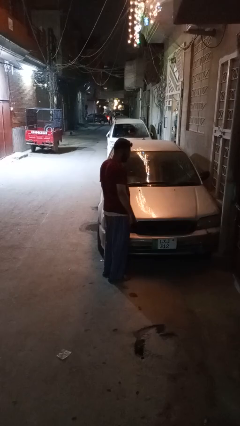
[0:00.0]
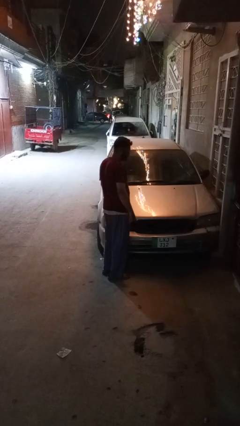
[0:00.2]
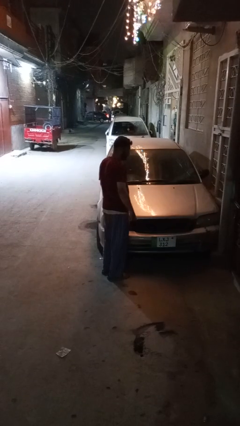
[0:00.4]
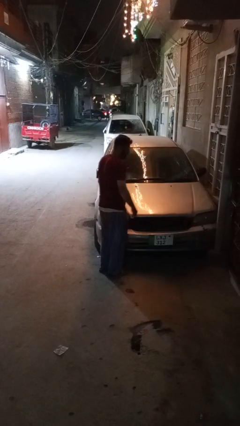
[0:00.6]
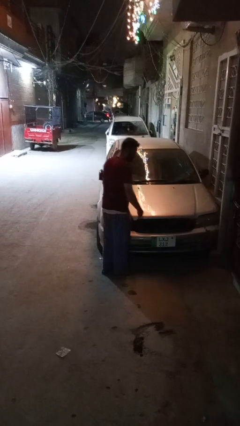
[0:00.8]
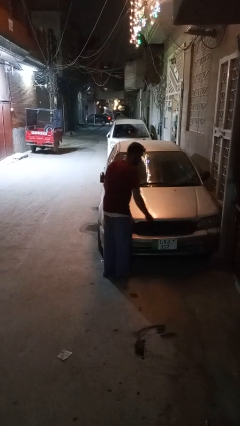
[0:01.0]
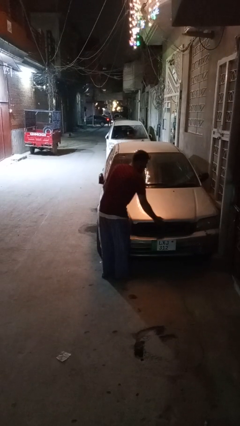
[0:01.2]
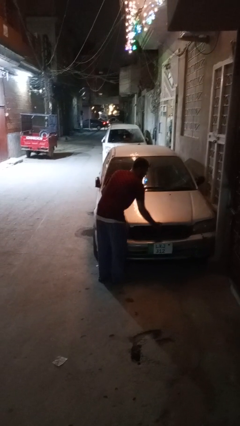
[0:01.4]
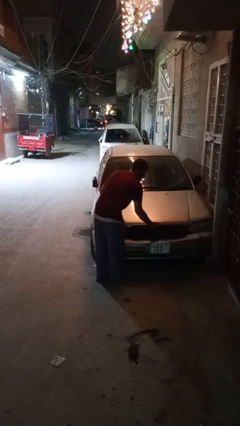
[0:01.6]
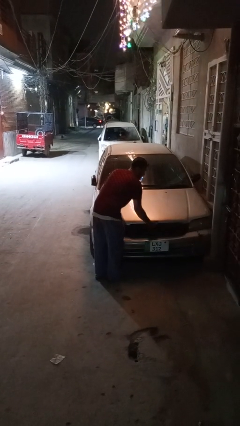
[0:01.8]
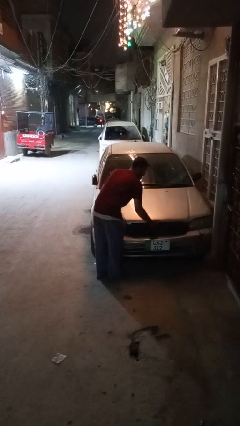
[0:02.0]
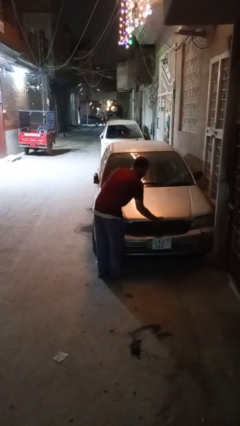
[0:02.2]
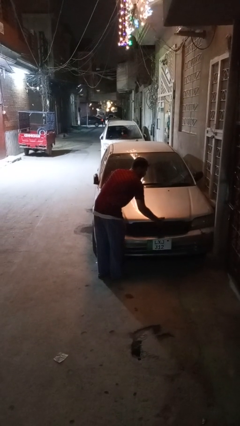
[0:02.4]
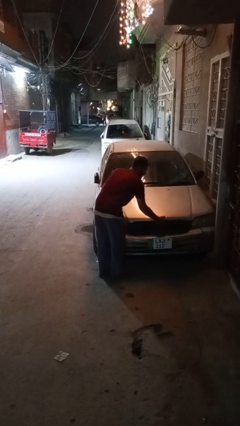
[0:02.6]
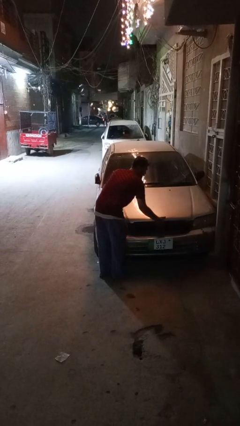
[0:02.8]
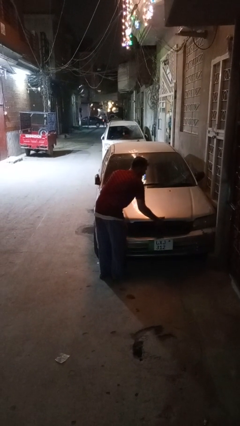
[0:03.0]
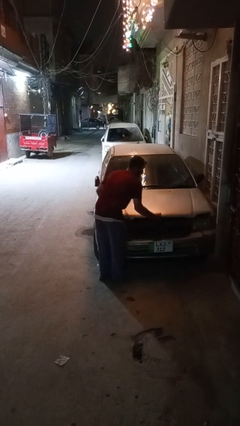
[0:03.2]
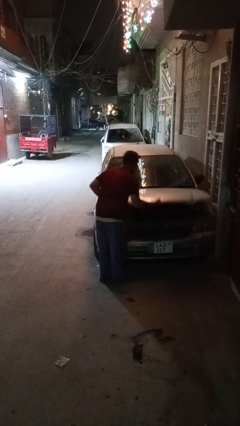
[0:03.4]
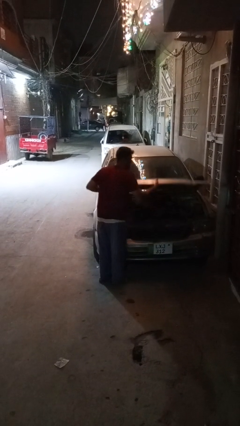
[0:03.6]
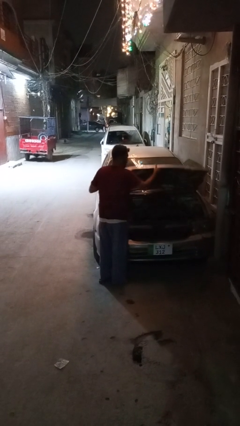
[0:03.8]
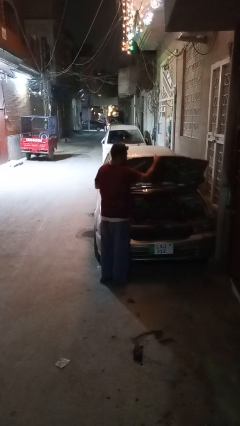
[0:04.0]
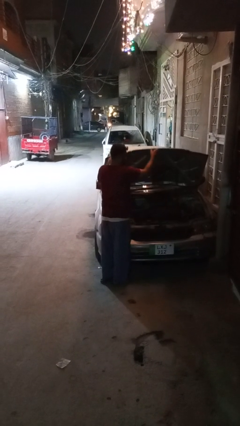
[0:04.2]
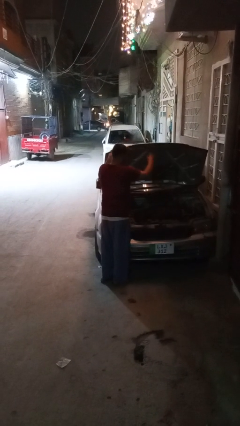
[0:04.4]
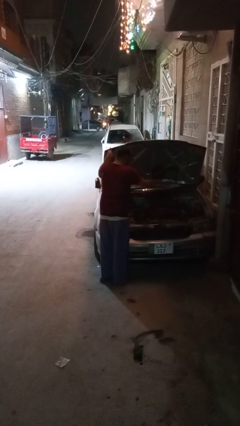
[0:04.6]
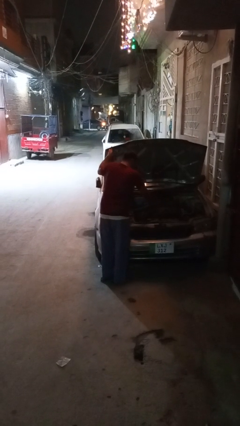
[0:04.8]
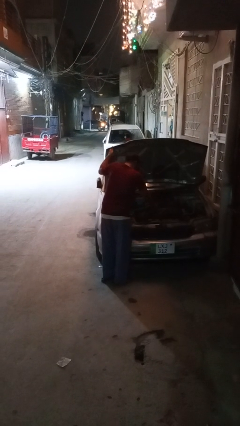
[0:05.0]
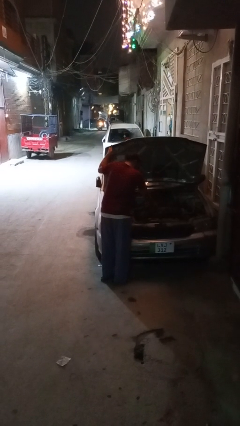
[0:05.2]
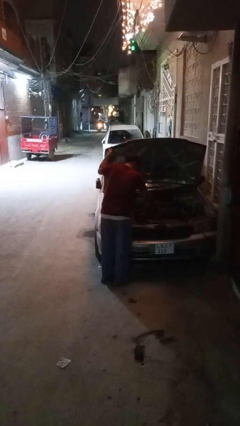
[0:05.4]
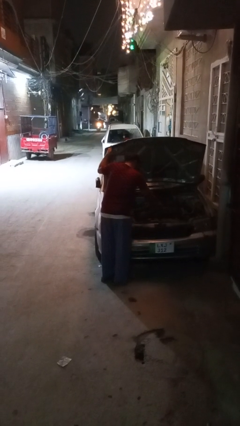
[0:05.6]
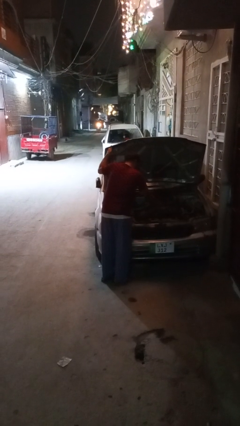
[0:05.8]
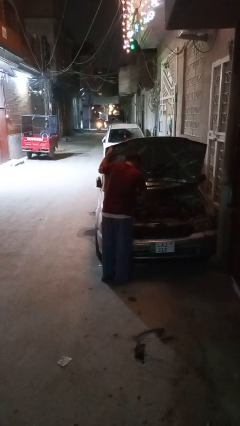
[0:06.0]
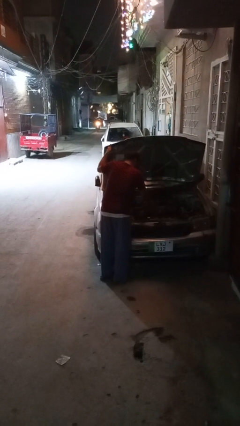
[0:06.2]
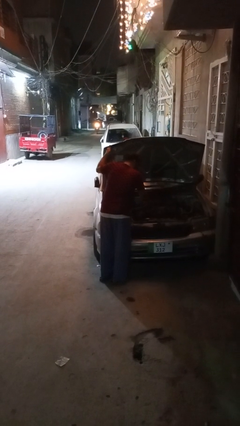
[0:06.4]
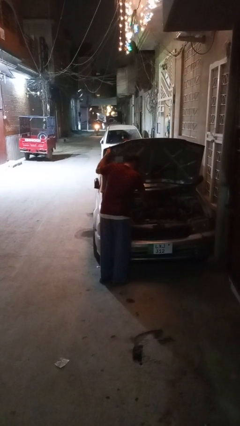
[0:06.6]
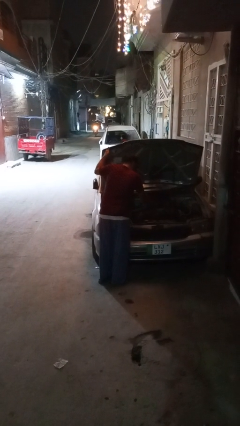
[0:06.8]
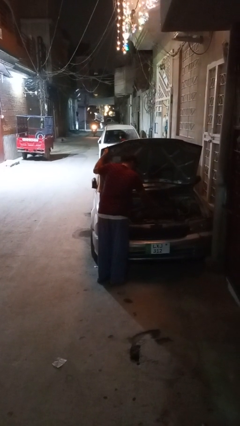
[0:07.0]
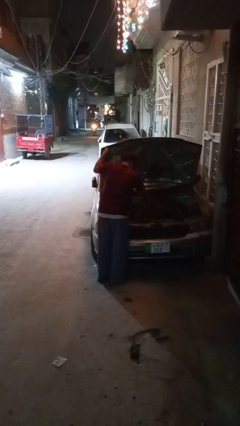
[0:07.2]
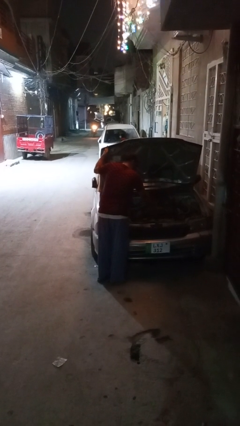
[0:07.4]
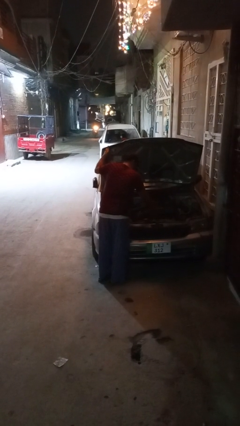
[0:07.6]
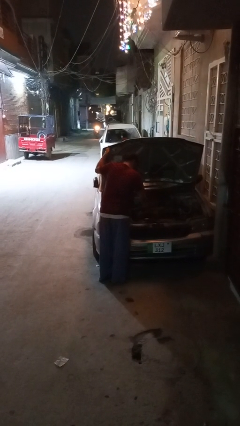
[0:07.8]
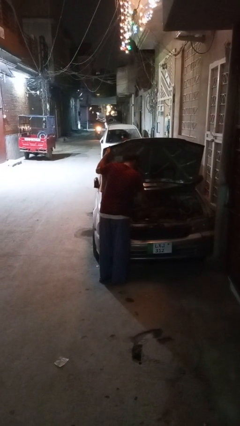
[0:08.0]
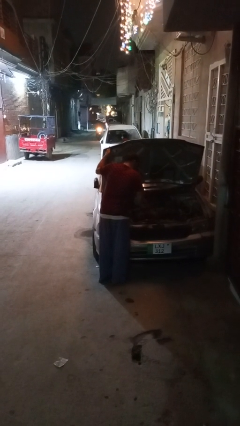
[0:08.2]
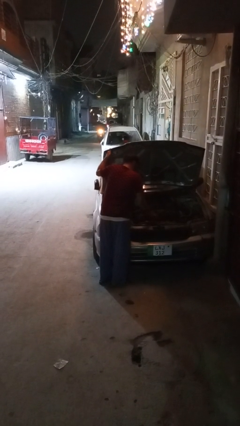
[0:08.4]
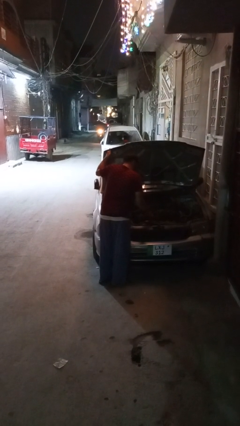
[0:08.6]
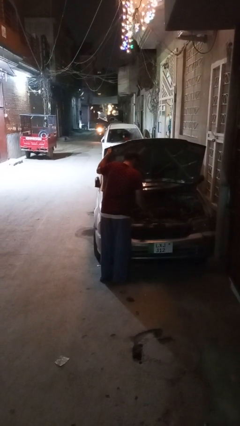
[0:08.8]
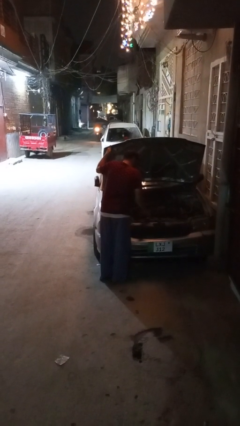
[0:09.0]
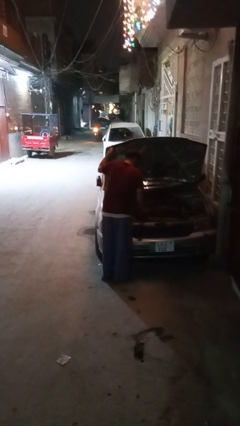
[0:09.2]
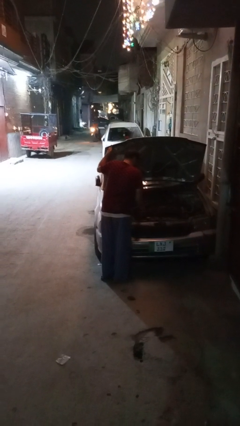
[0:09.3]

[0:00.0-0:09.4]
person opens car hood

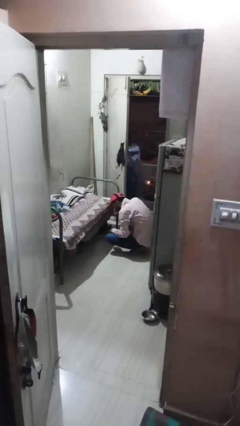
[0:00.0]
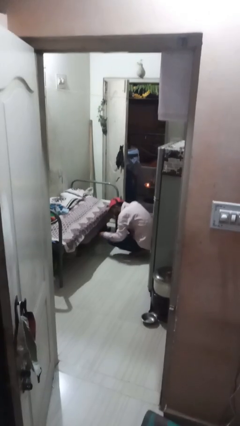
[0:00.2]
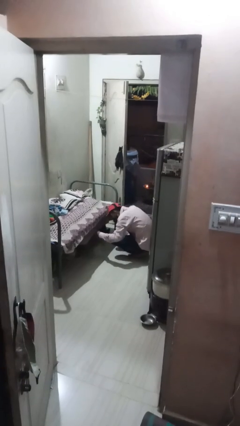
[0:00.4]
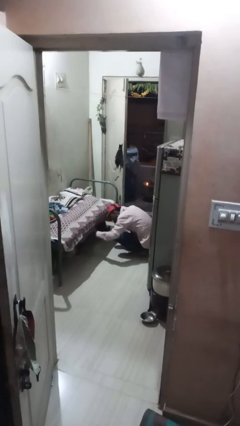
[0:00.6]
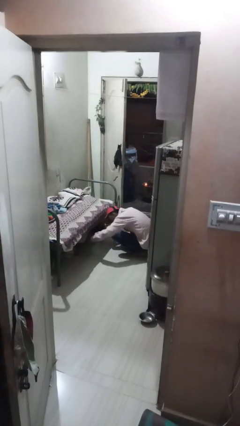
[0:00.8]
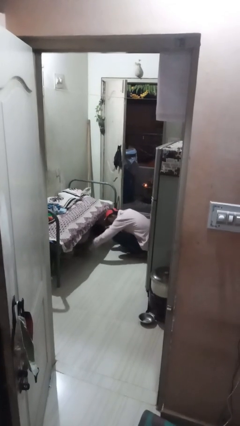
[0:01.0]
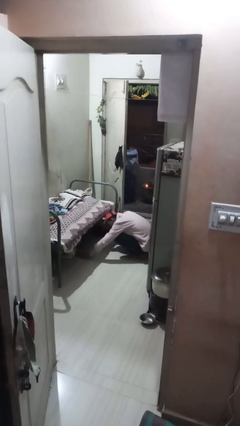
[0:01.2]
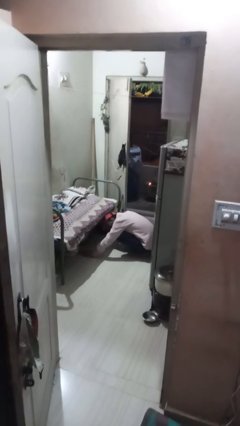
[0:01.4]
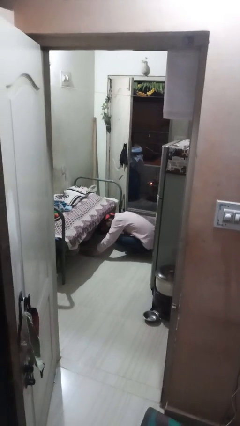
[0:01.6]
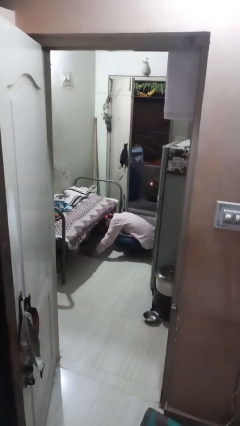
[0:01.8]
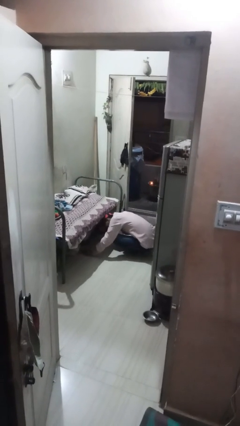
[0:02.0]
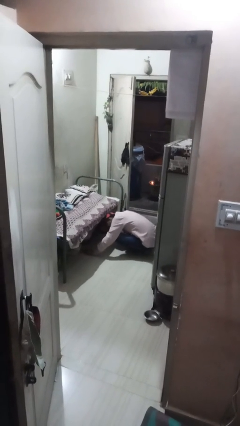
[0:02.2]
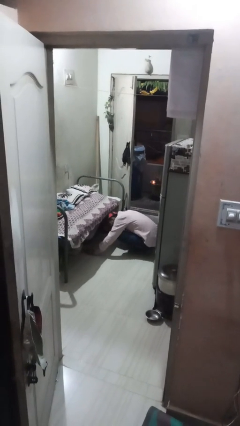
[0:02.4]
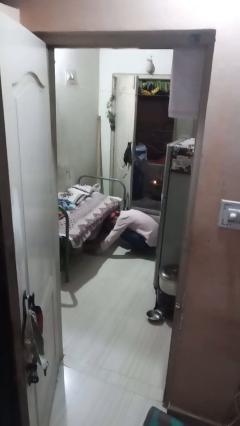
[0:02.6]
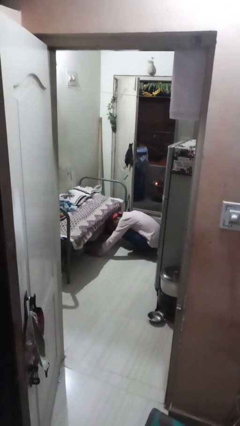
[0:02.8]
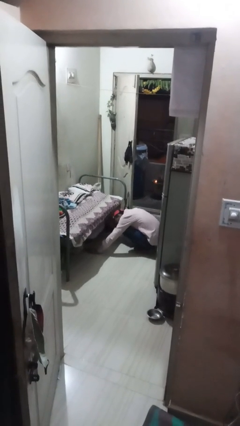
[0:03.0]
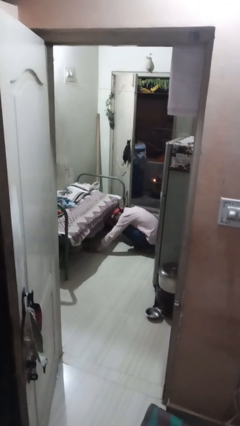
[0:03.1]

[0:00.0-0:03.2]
person searches under bed

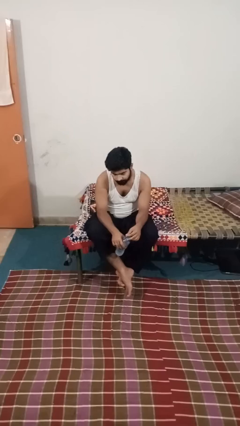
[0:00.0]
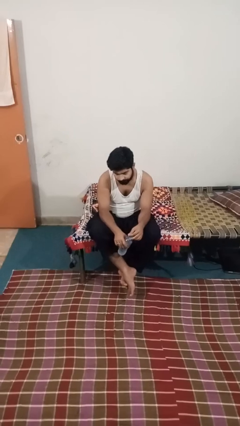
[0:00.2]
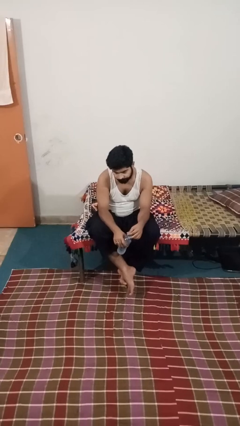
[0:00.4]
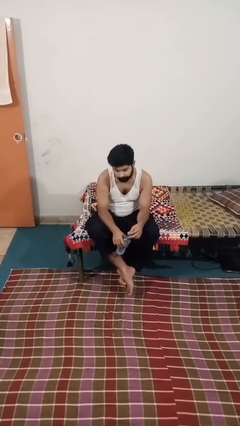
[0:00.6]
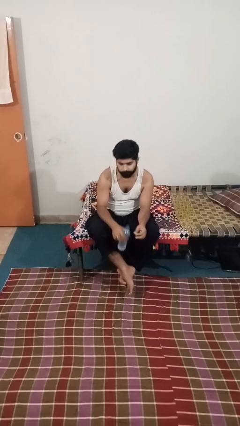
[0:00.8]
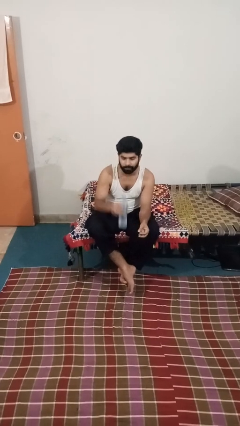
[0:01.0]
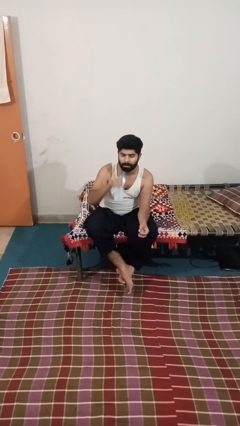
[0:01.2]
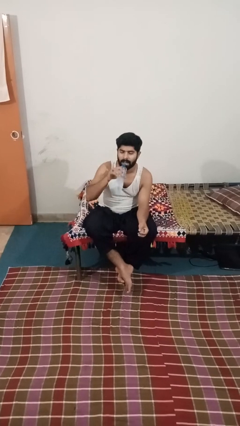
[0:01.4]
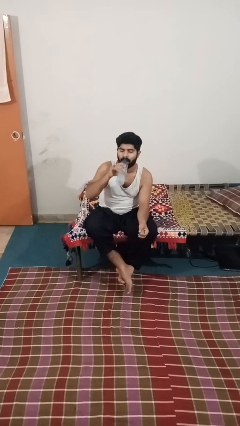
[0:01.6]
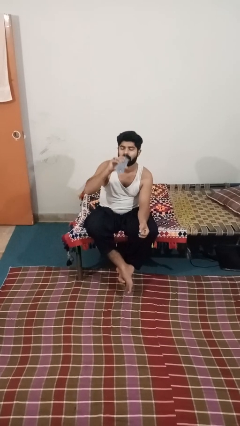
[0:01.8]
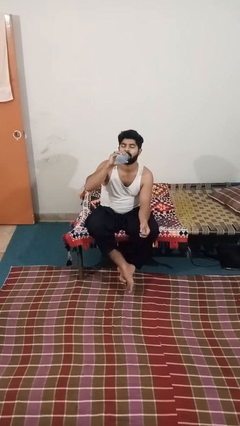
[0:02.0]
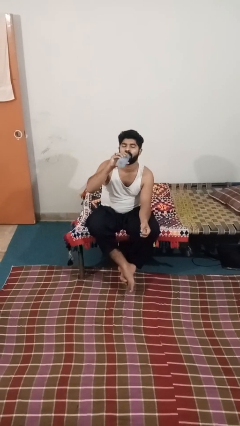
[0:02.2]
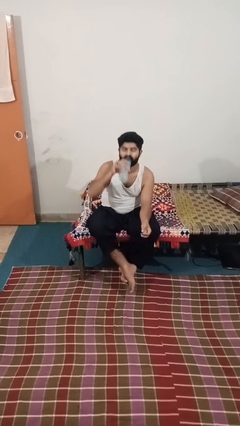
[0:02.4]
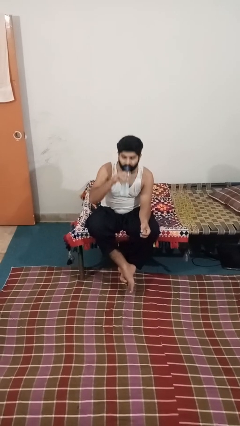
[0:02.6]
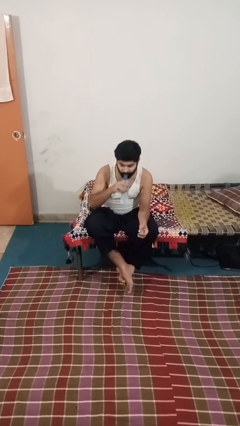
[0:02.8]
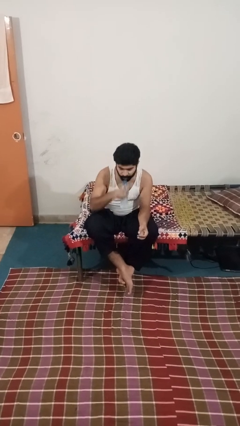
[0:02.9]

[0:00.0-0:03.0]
person drinks from bottle

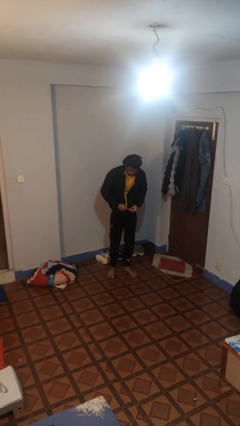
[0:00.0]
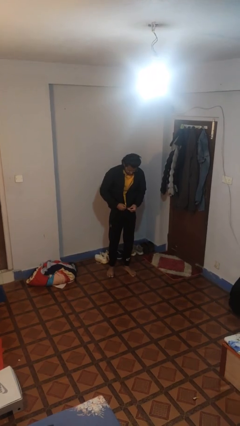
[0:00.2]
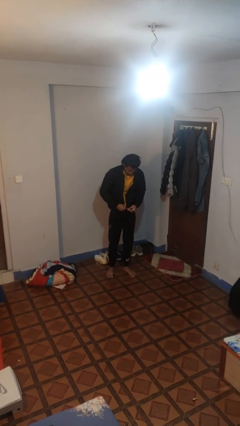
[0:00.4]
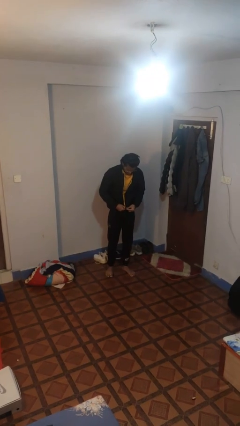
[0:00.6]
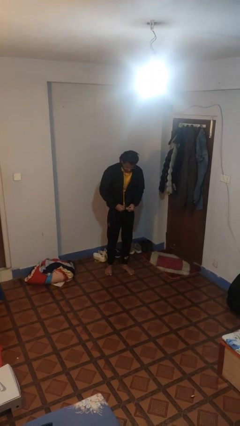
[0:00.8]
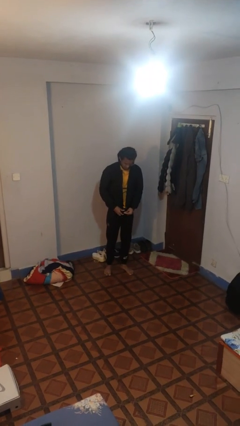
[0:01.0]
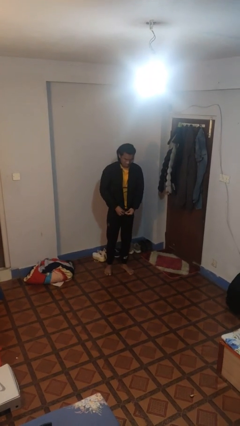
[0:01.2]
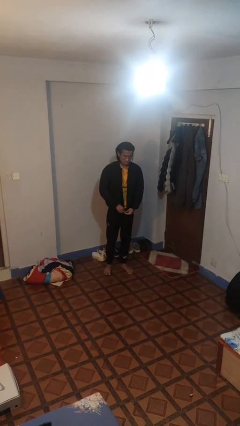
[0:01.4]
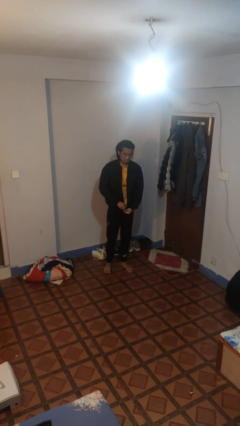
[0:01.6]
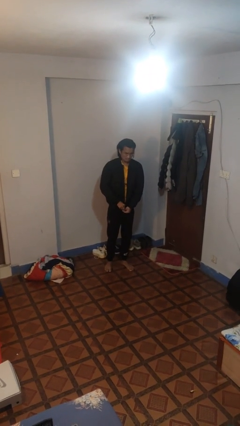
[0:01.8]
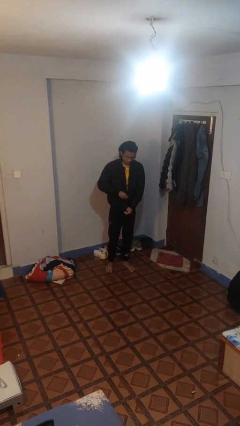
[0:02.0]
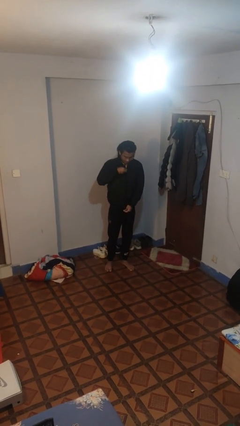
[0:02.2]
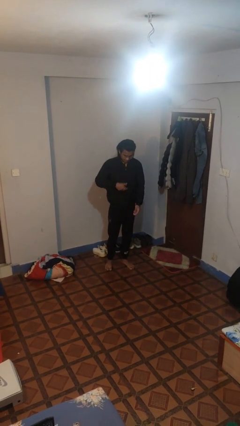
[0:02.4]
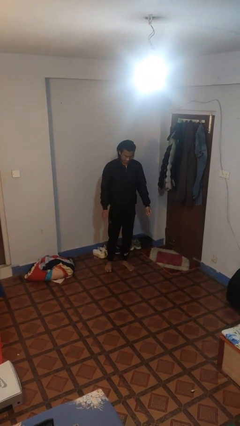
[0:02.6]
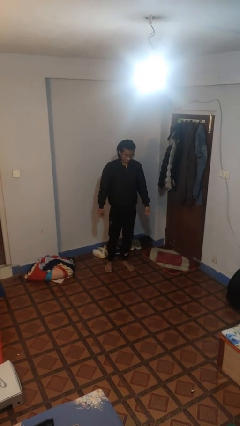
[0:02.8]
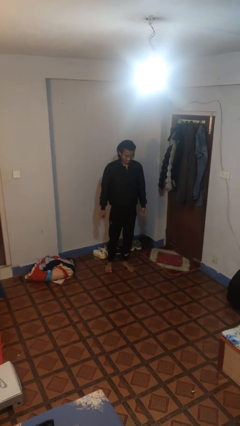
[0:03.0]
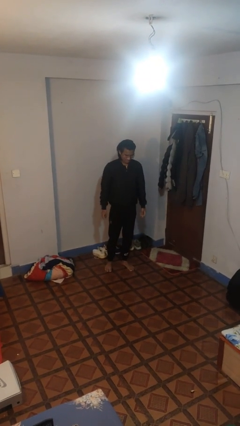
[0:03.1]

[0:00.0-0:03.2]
person zips up jacket
